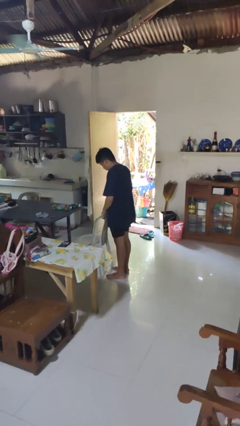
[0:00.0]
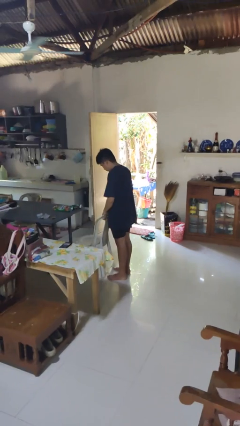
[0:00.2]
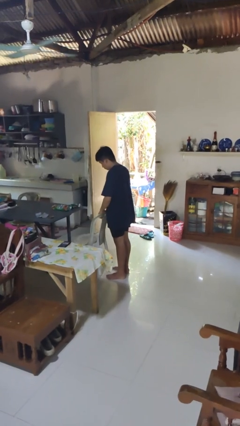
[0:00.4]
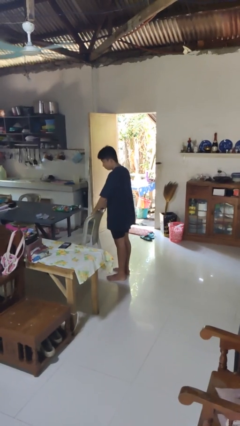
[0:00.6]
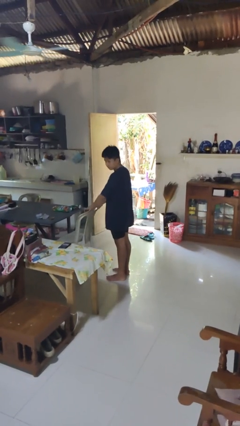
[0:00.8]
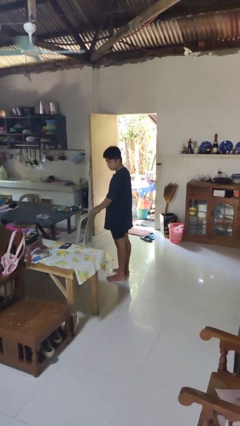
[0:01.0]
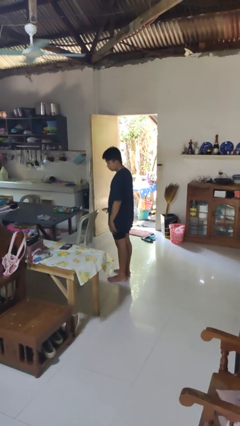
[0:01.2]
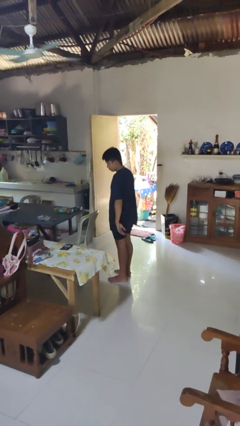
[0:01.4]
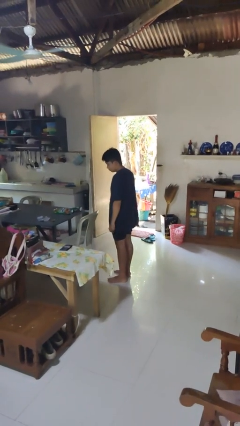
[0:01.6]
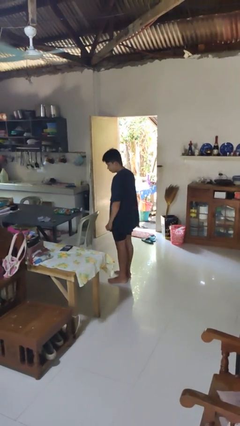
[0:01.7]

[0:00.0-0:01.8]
person pushes in chair

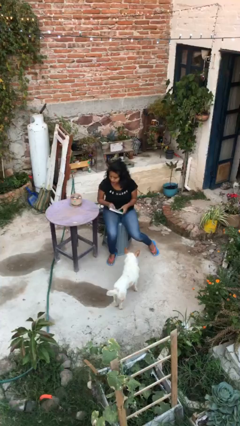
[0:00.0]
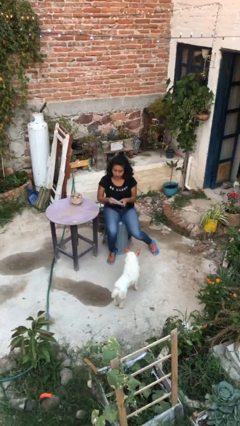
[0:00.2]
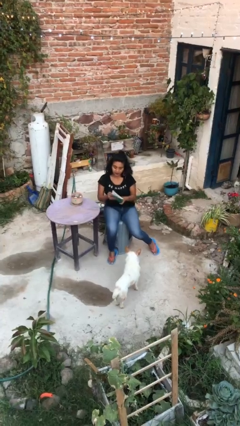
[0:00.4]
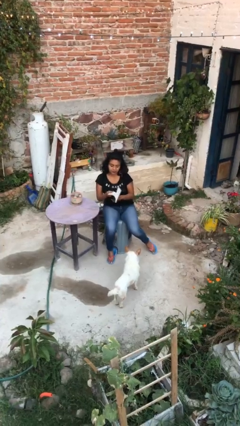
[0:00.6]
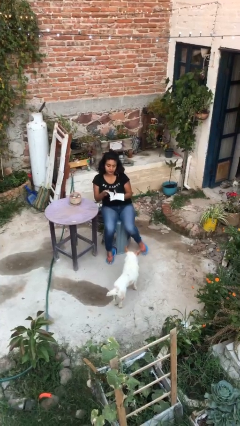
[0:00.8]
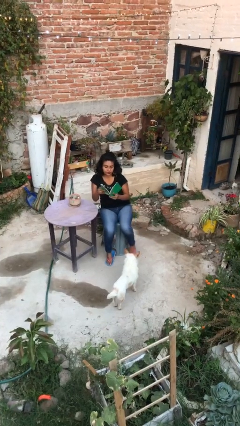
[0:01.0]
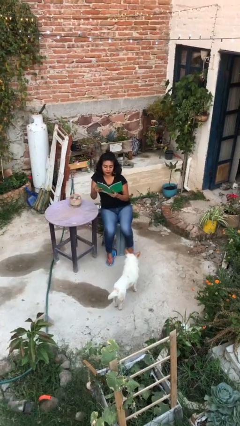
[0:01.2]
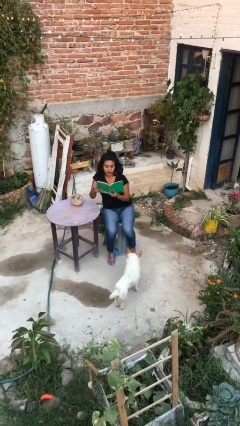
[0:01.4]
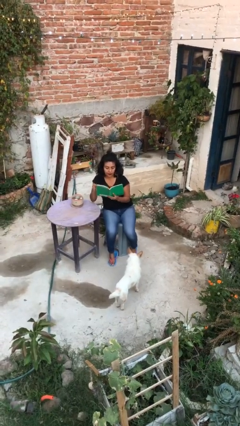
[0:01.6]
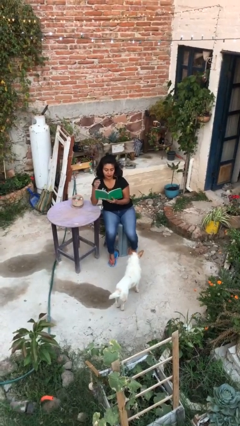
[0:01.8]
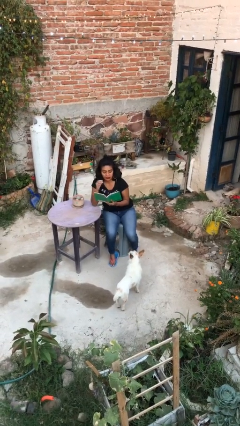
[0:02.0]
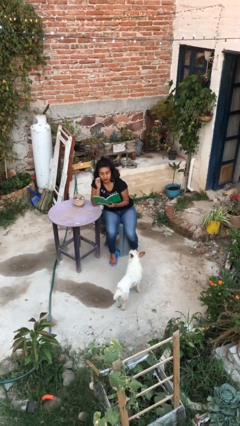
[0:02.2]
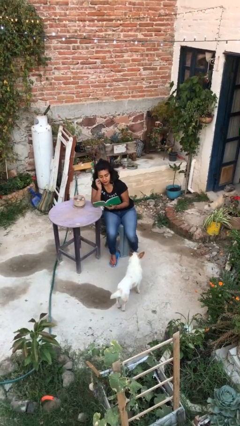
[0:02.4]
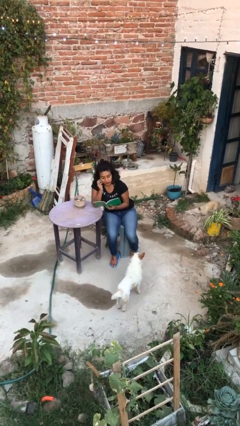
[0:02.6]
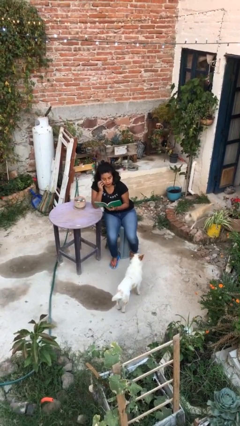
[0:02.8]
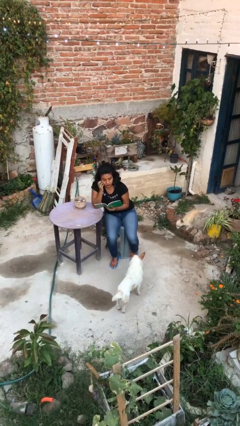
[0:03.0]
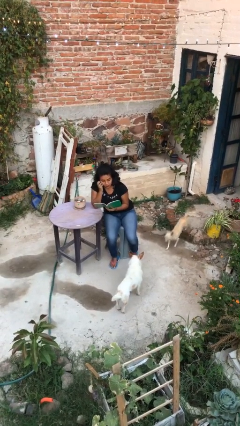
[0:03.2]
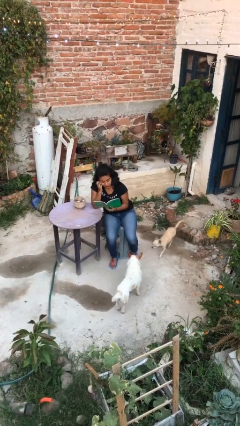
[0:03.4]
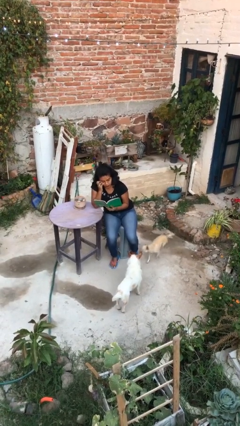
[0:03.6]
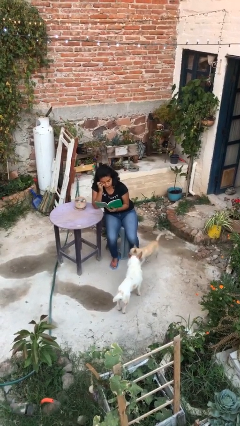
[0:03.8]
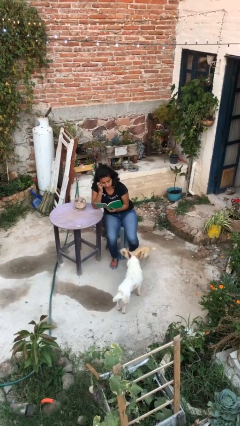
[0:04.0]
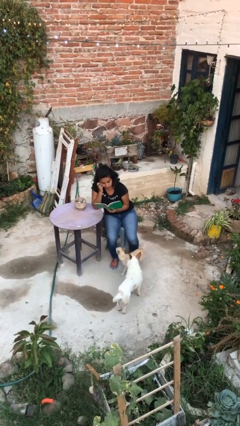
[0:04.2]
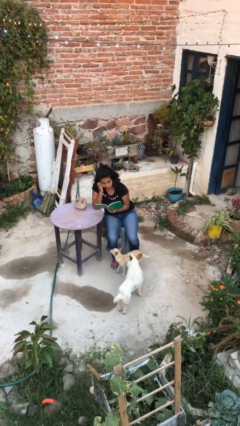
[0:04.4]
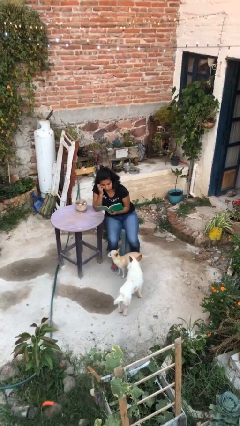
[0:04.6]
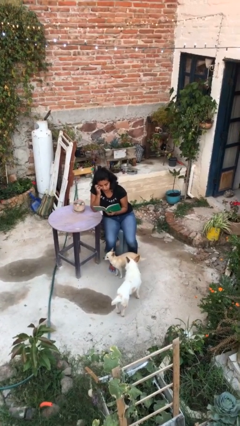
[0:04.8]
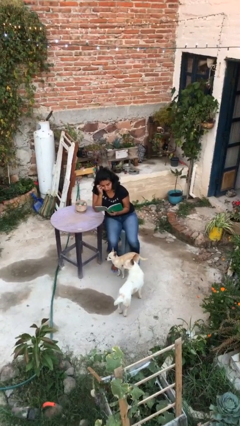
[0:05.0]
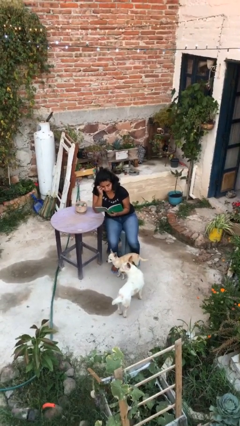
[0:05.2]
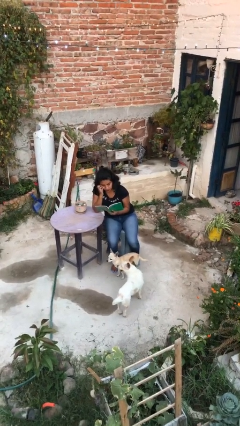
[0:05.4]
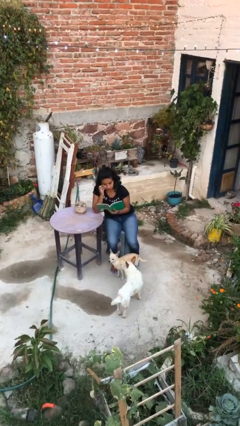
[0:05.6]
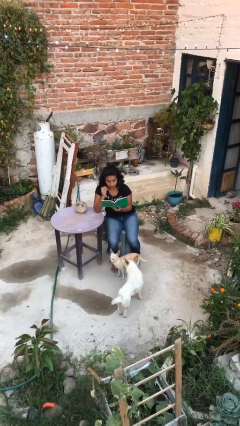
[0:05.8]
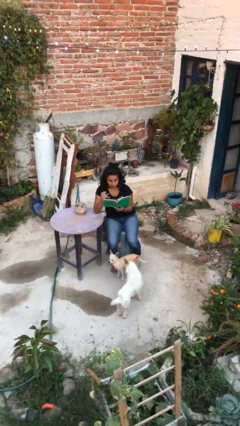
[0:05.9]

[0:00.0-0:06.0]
person reads document

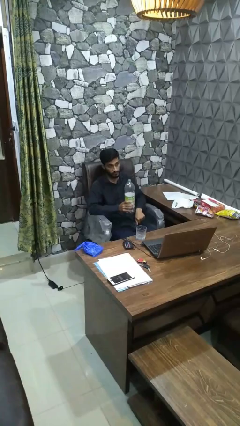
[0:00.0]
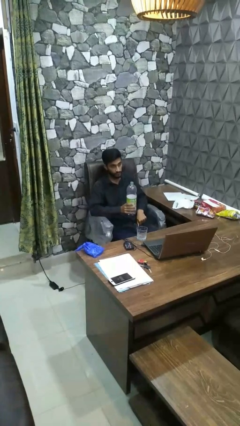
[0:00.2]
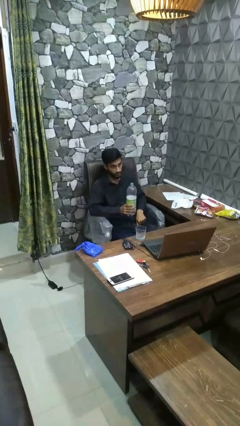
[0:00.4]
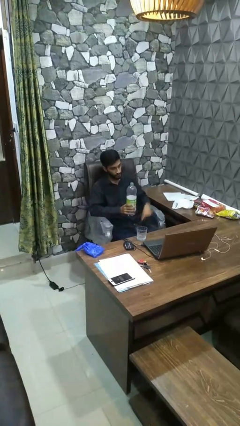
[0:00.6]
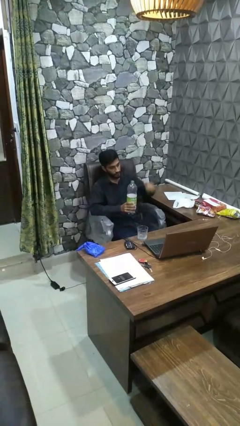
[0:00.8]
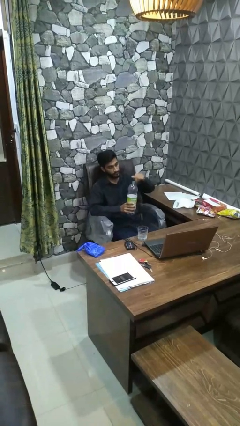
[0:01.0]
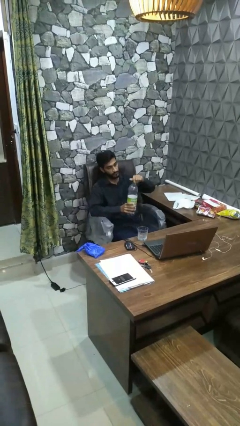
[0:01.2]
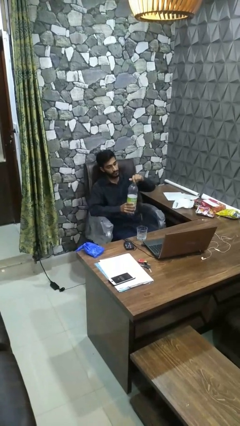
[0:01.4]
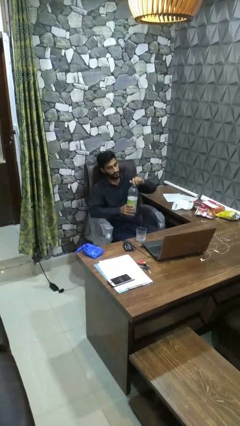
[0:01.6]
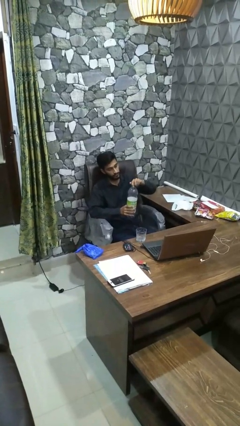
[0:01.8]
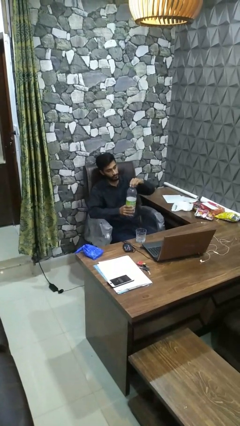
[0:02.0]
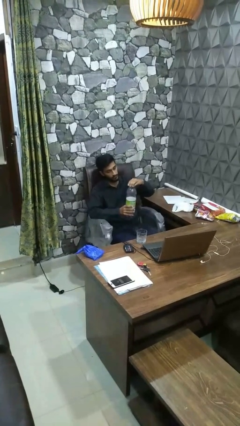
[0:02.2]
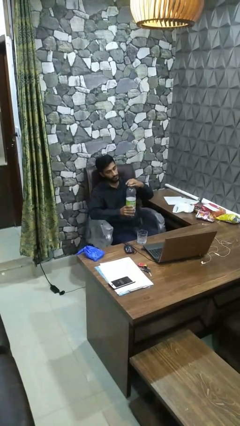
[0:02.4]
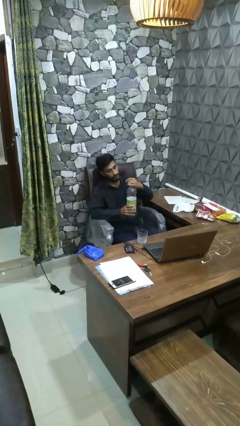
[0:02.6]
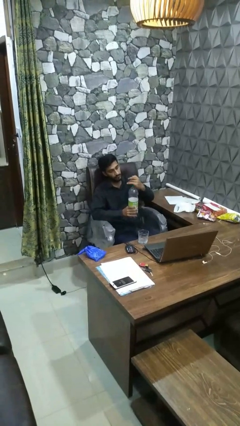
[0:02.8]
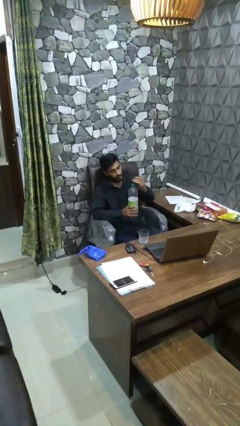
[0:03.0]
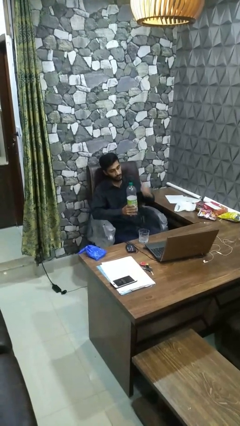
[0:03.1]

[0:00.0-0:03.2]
person screws lid to bottle

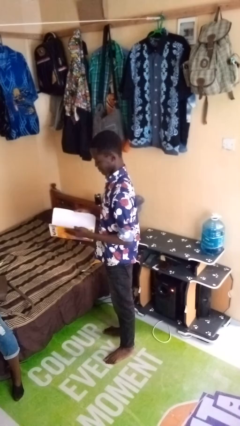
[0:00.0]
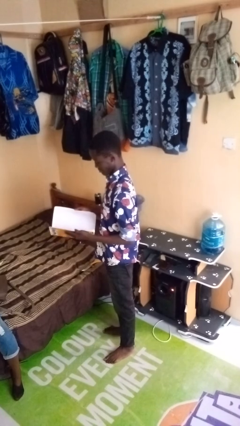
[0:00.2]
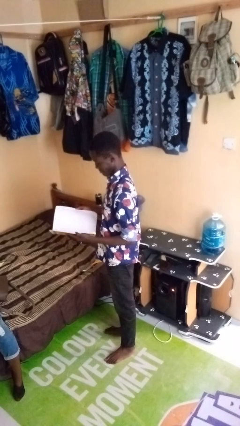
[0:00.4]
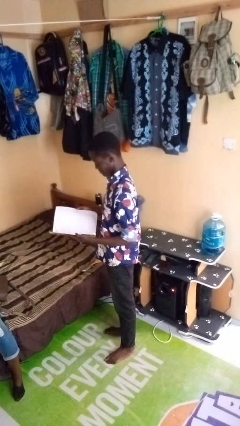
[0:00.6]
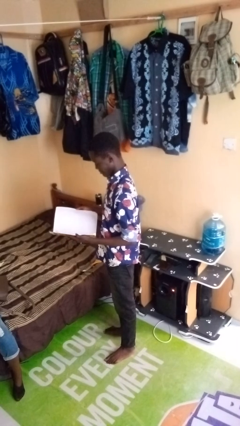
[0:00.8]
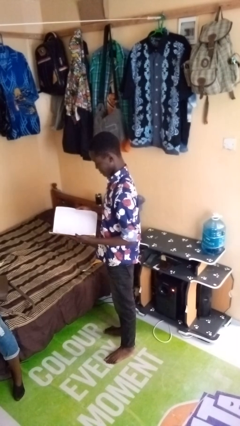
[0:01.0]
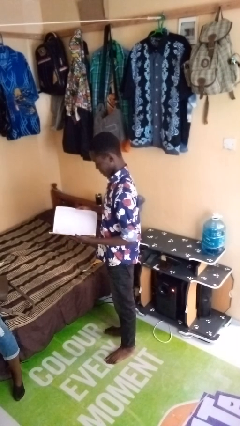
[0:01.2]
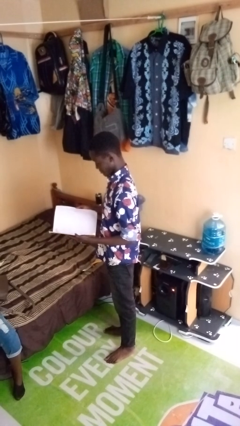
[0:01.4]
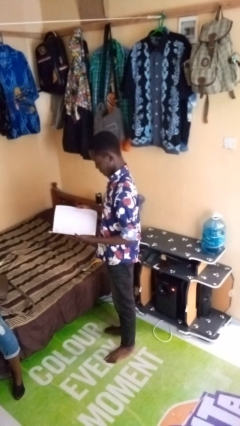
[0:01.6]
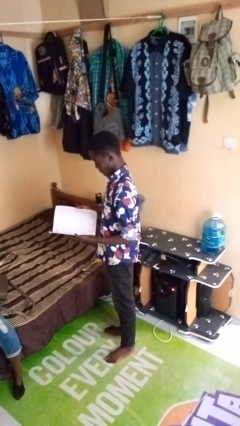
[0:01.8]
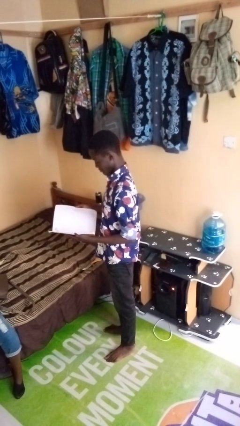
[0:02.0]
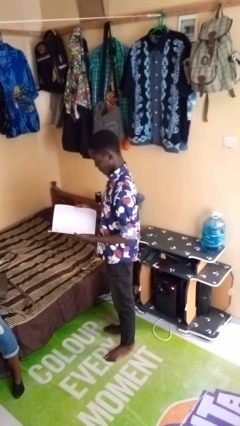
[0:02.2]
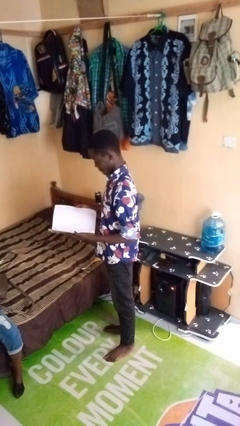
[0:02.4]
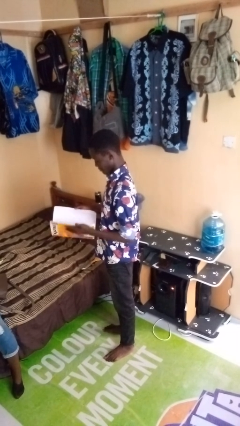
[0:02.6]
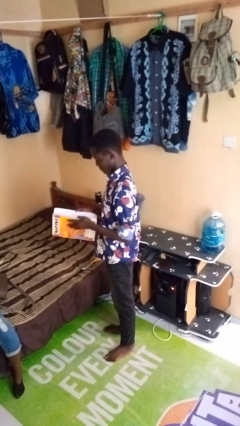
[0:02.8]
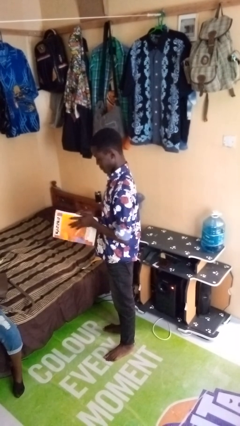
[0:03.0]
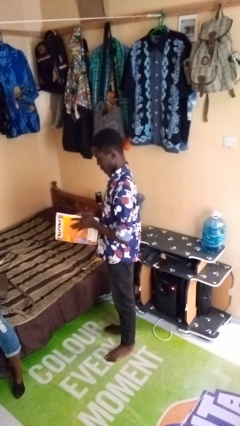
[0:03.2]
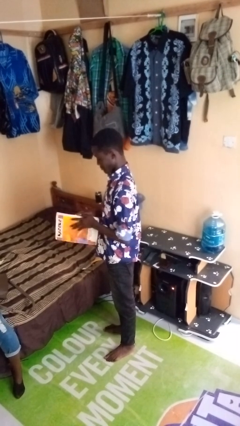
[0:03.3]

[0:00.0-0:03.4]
person reads book

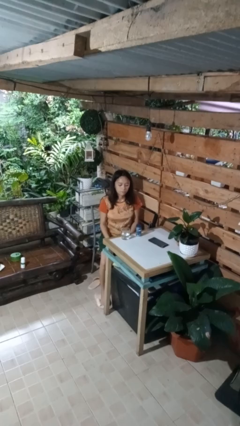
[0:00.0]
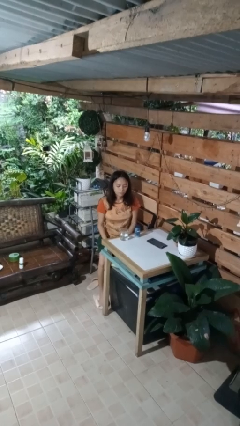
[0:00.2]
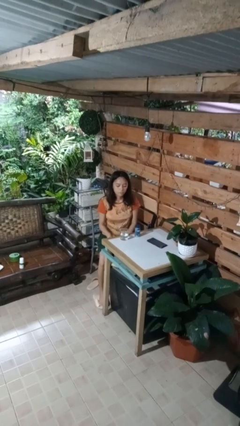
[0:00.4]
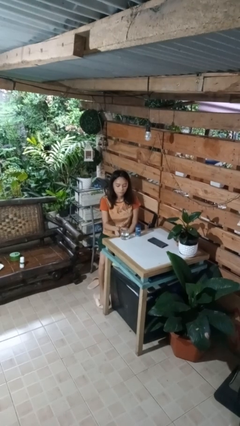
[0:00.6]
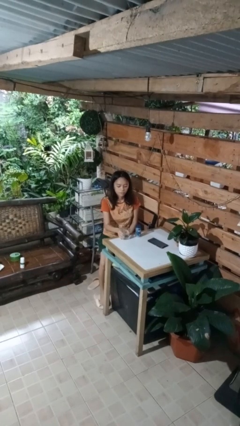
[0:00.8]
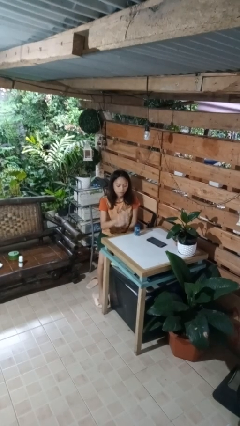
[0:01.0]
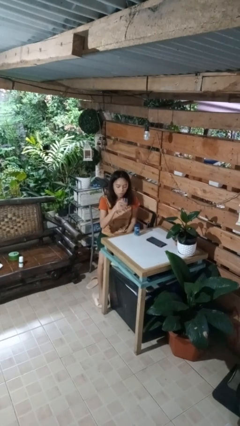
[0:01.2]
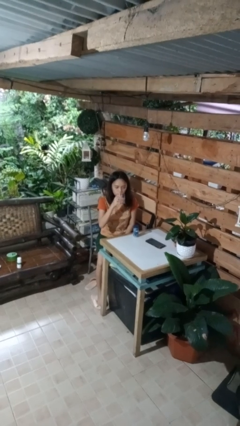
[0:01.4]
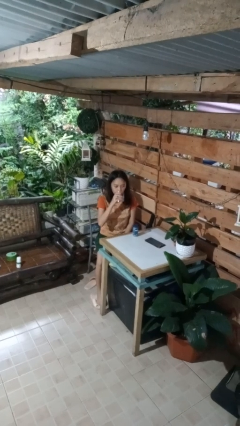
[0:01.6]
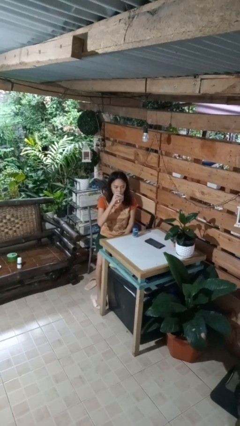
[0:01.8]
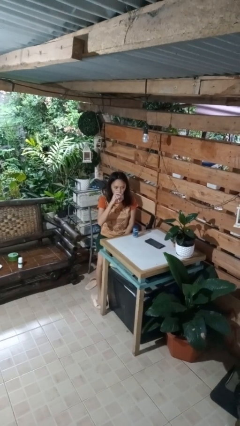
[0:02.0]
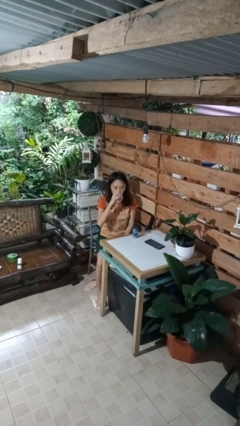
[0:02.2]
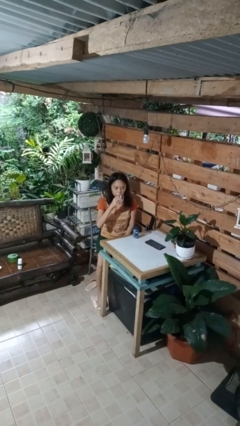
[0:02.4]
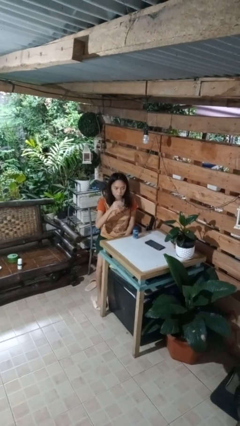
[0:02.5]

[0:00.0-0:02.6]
person drinks from cup

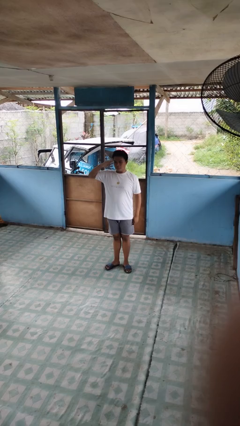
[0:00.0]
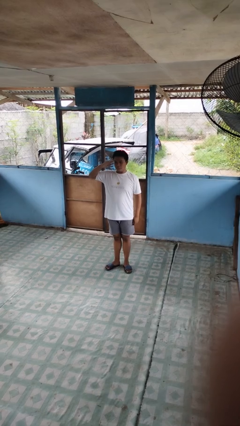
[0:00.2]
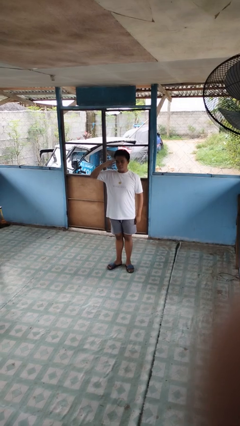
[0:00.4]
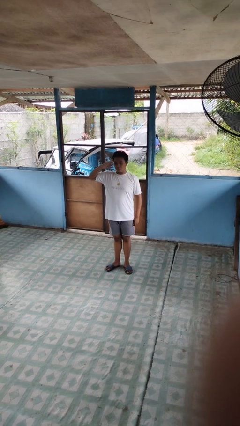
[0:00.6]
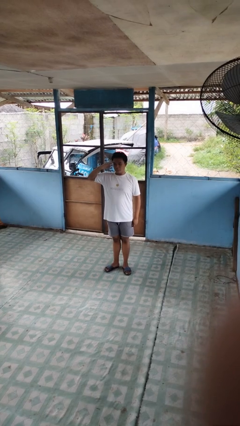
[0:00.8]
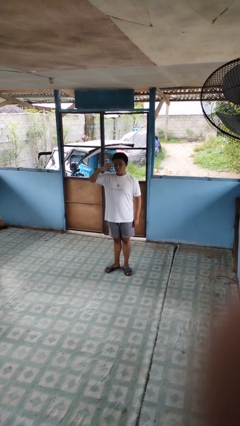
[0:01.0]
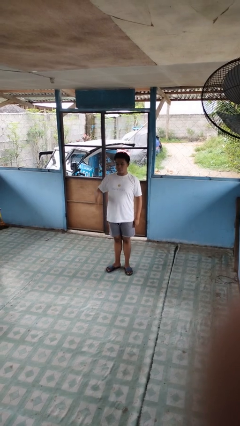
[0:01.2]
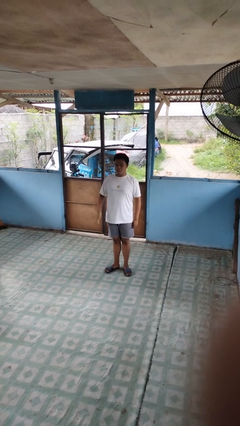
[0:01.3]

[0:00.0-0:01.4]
person salutes
